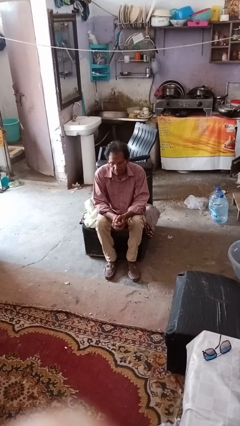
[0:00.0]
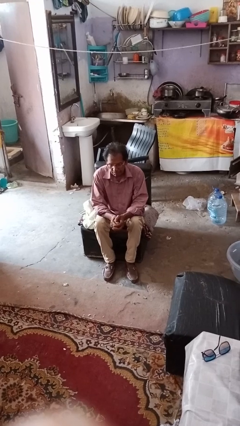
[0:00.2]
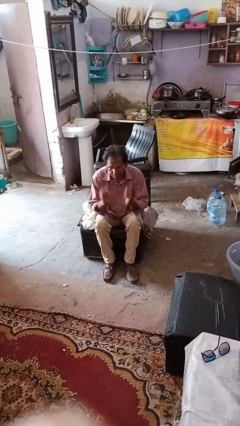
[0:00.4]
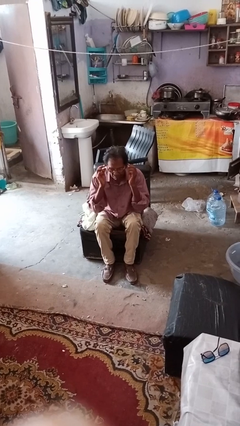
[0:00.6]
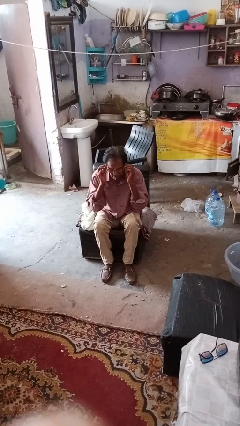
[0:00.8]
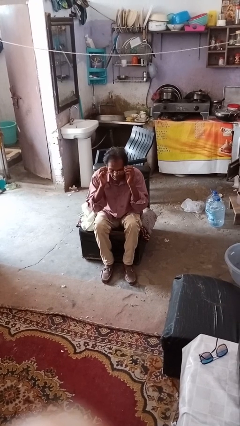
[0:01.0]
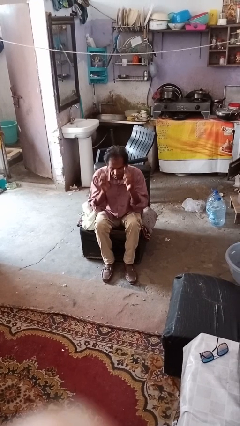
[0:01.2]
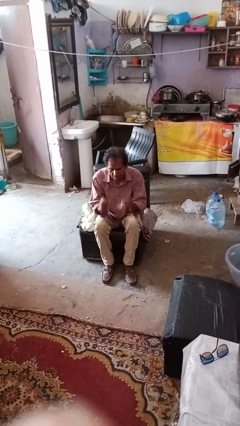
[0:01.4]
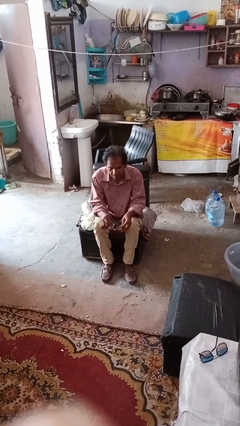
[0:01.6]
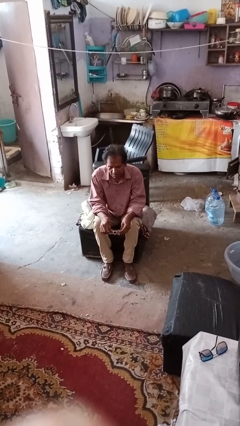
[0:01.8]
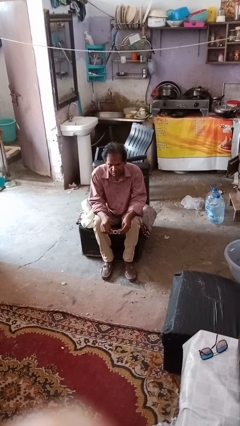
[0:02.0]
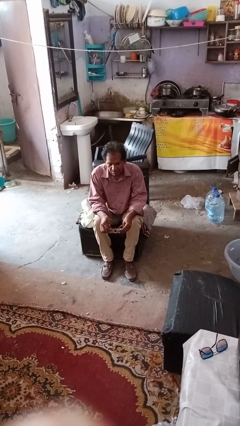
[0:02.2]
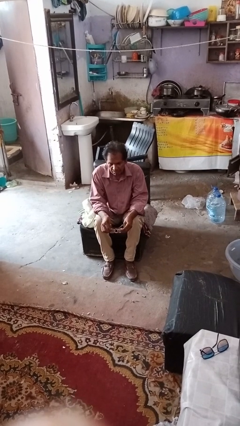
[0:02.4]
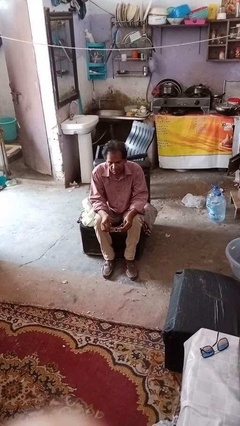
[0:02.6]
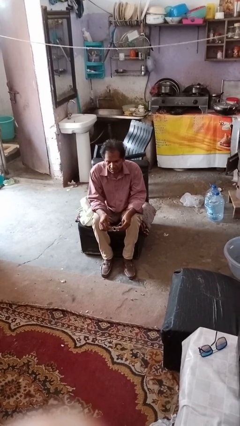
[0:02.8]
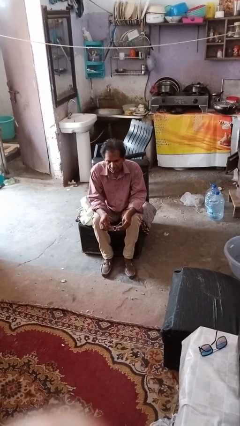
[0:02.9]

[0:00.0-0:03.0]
person takes off glasses

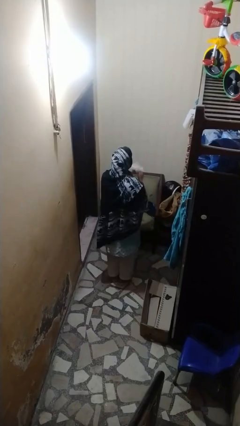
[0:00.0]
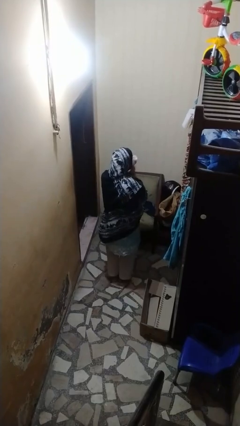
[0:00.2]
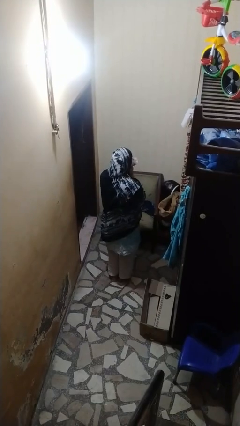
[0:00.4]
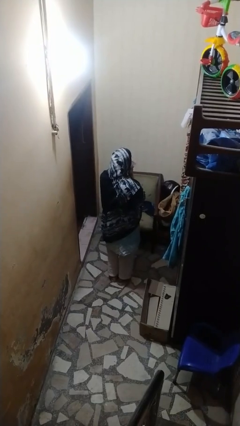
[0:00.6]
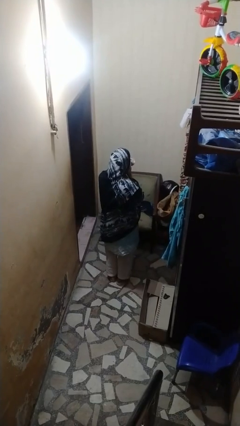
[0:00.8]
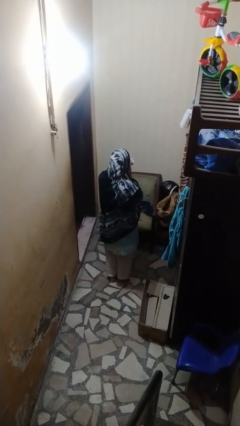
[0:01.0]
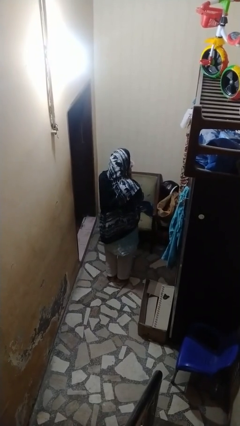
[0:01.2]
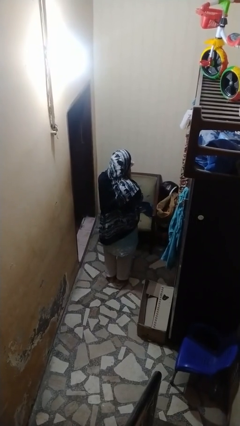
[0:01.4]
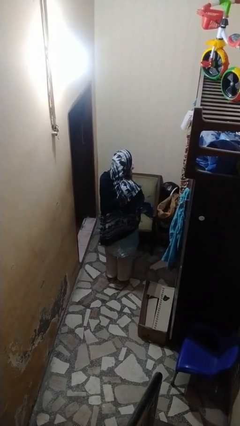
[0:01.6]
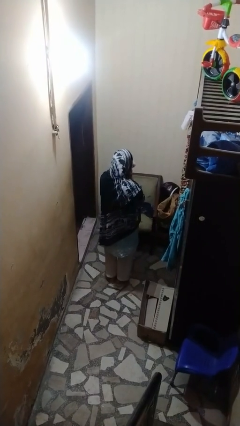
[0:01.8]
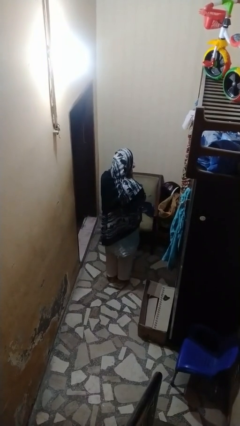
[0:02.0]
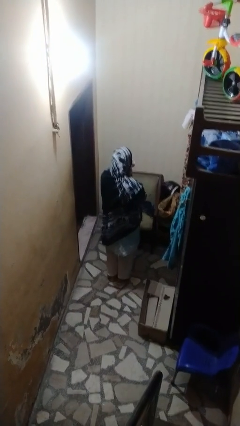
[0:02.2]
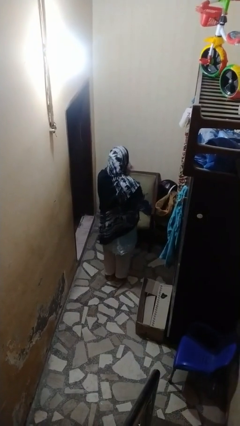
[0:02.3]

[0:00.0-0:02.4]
person blows nose

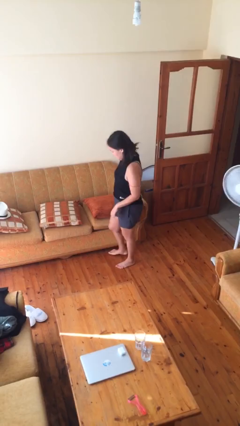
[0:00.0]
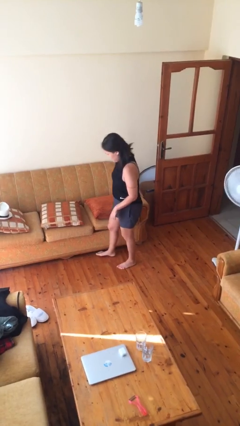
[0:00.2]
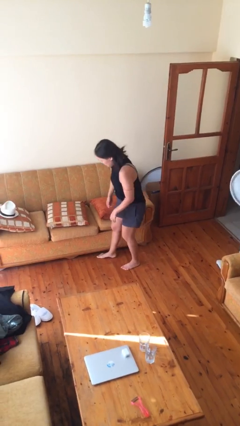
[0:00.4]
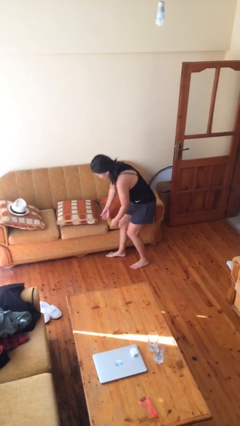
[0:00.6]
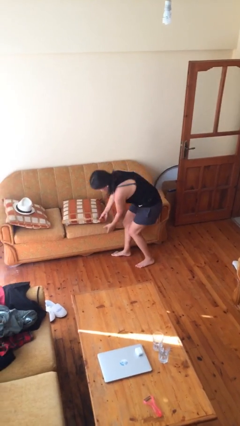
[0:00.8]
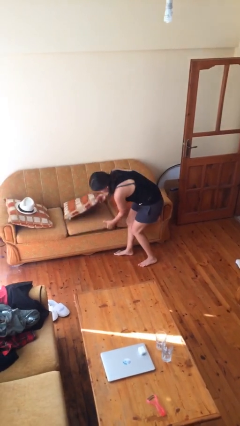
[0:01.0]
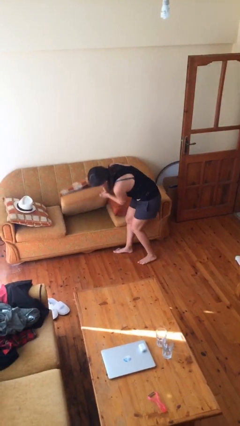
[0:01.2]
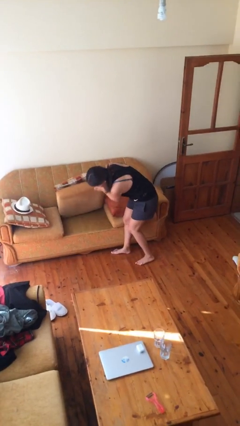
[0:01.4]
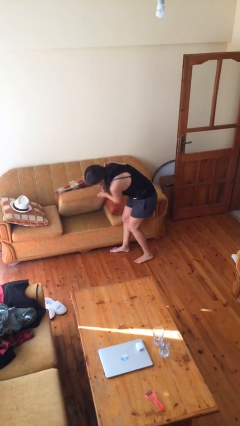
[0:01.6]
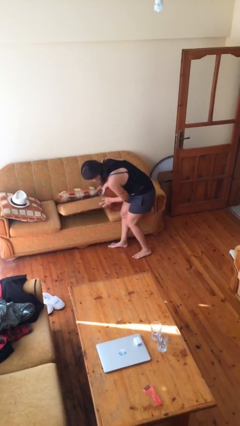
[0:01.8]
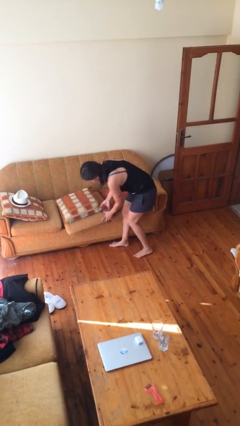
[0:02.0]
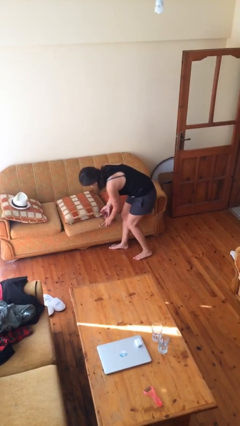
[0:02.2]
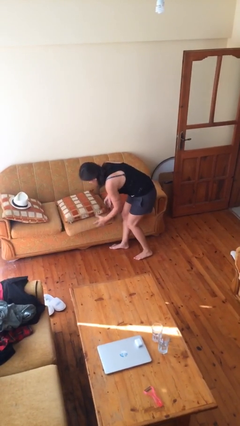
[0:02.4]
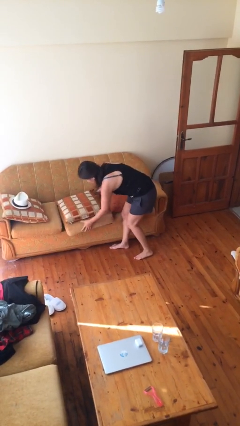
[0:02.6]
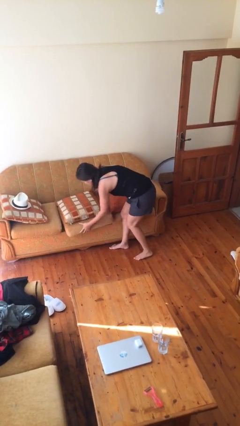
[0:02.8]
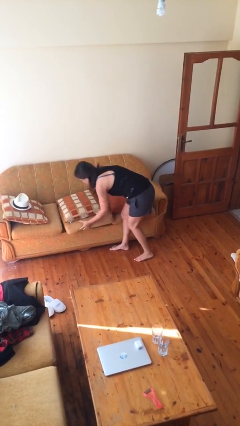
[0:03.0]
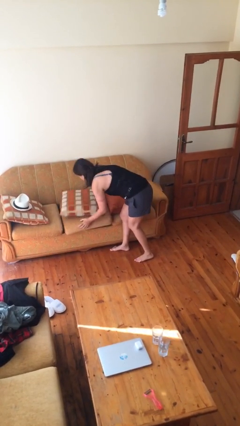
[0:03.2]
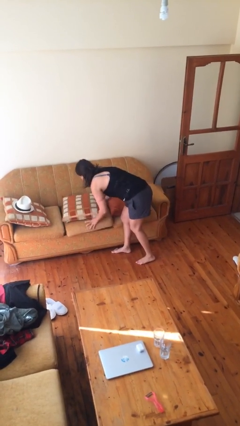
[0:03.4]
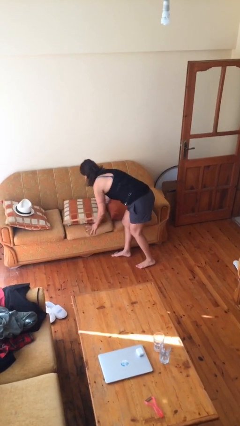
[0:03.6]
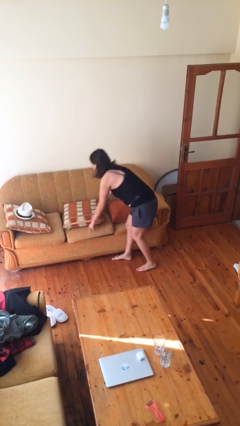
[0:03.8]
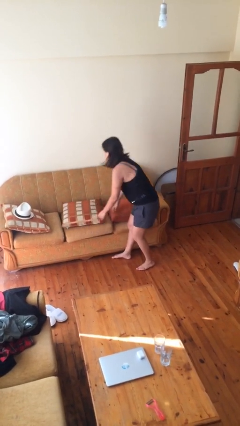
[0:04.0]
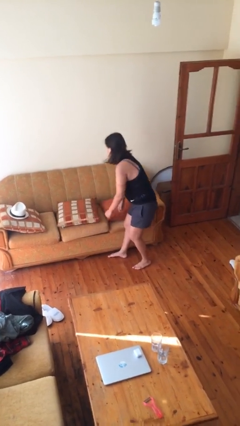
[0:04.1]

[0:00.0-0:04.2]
person searches in couch

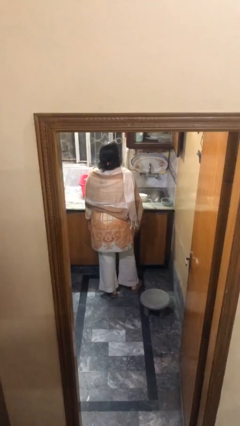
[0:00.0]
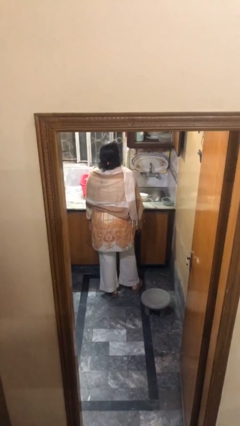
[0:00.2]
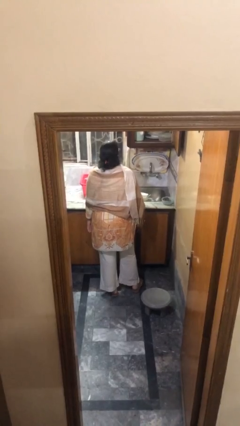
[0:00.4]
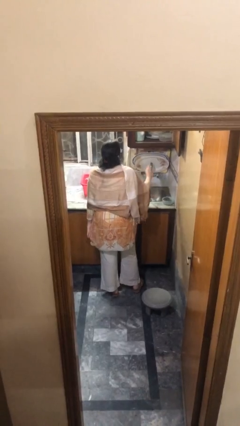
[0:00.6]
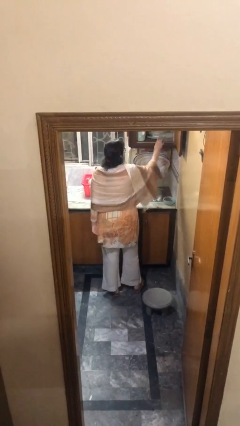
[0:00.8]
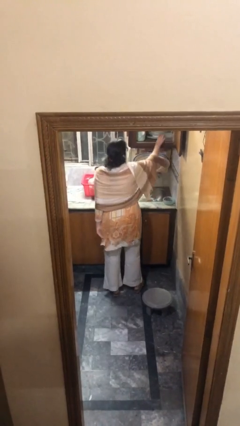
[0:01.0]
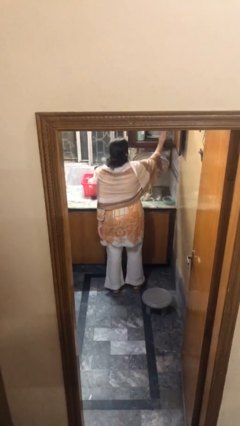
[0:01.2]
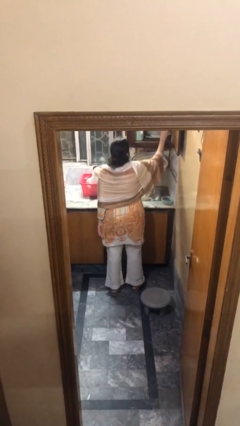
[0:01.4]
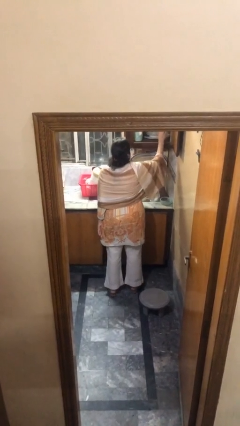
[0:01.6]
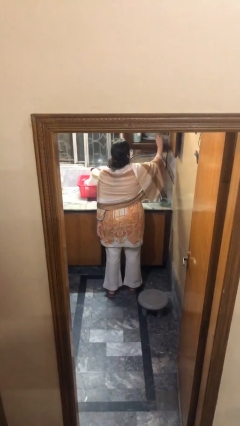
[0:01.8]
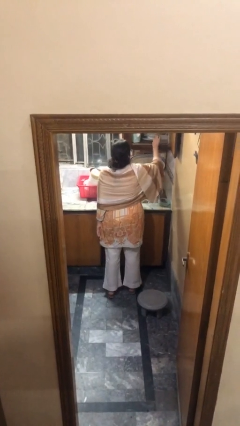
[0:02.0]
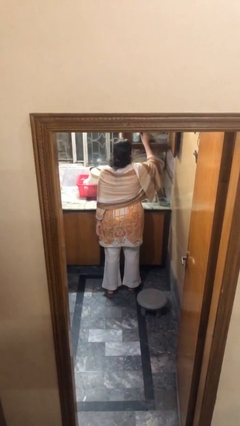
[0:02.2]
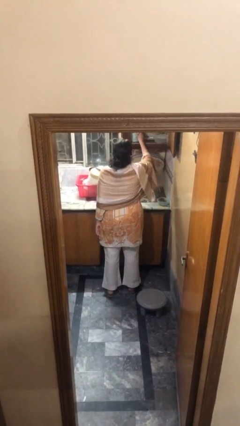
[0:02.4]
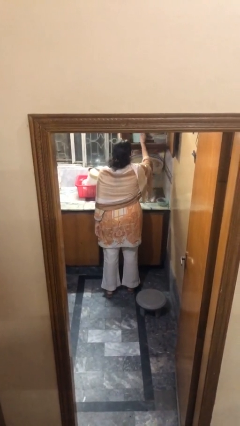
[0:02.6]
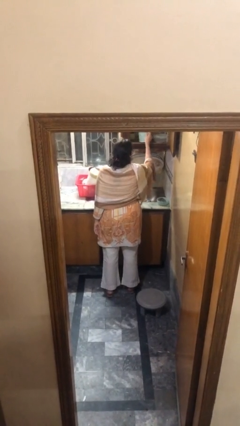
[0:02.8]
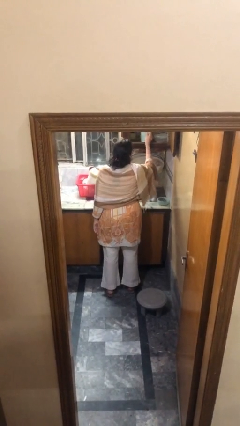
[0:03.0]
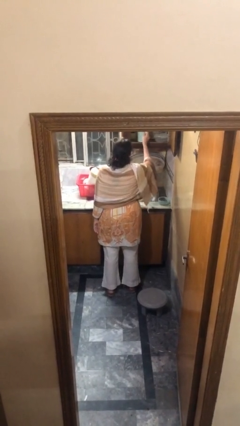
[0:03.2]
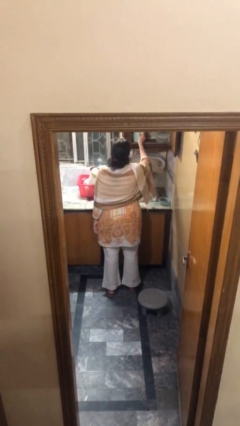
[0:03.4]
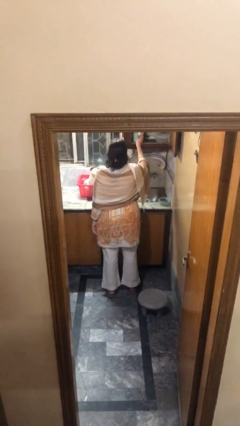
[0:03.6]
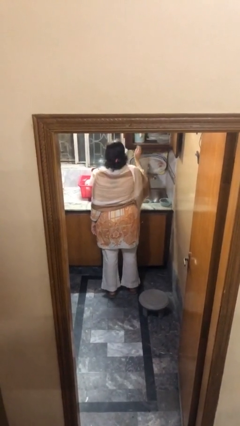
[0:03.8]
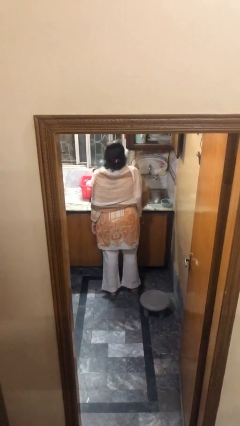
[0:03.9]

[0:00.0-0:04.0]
person searches in kitchen drawer

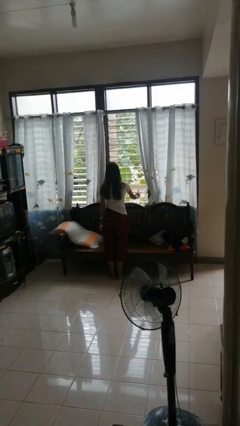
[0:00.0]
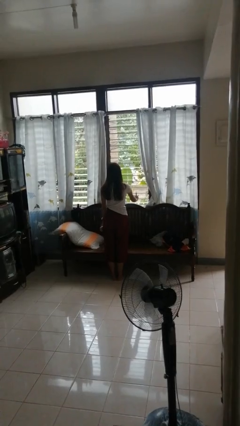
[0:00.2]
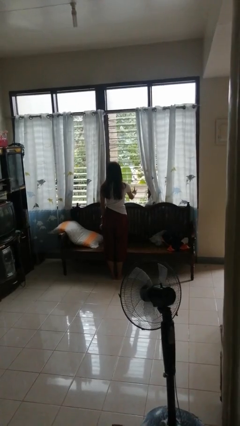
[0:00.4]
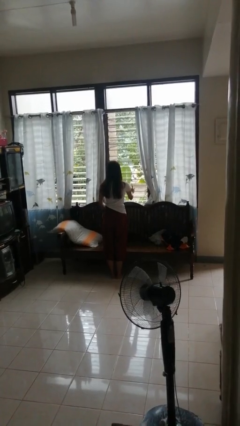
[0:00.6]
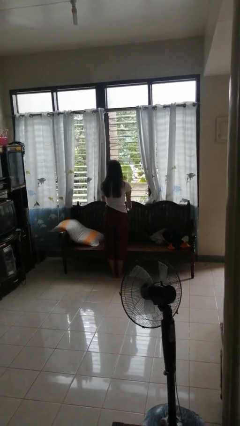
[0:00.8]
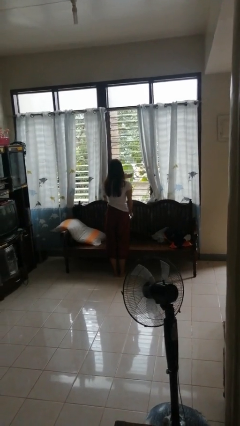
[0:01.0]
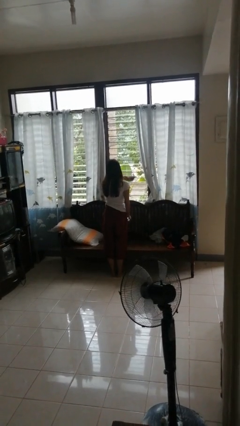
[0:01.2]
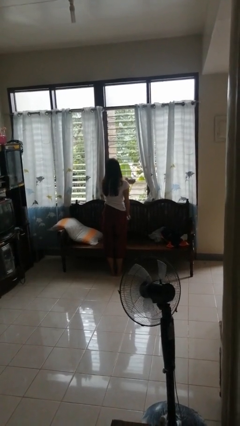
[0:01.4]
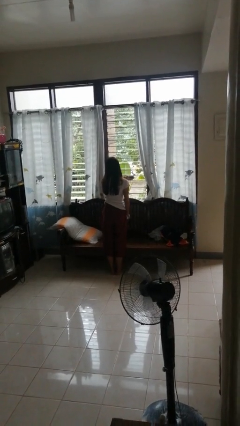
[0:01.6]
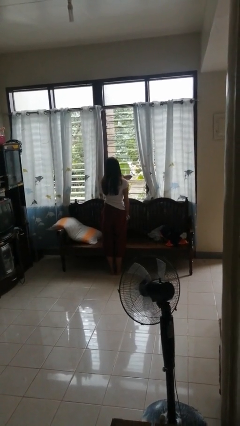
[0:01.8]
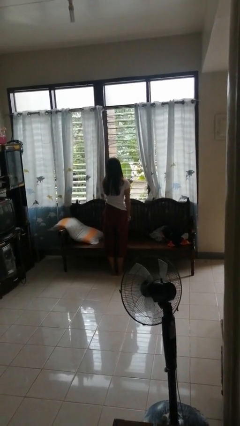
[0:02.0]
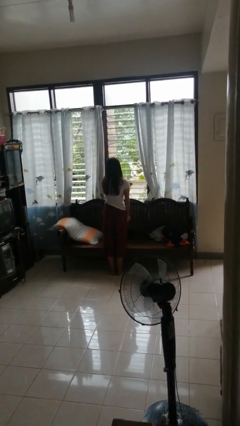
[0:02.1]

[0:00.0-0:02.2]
person washes window

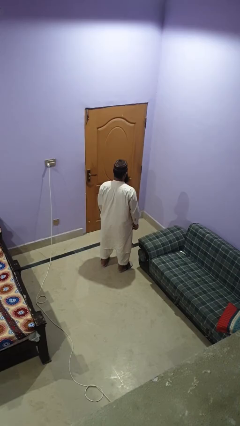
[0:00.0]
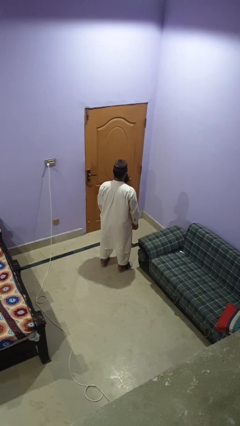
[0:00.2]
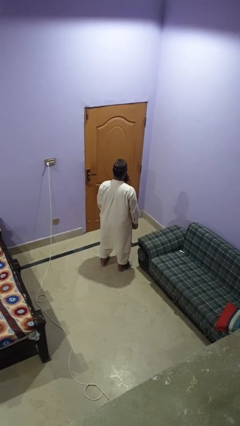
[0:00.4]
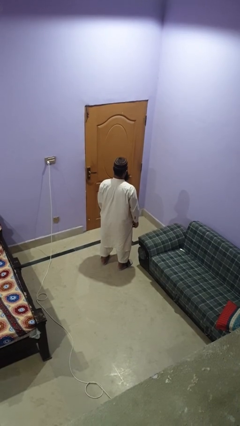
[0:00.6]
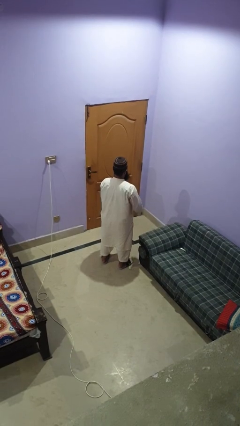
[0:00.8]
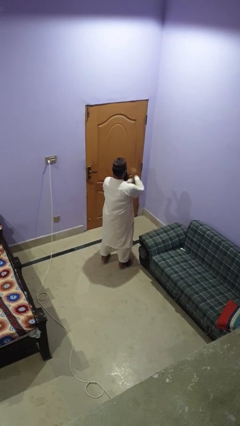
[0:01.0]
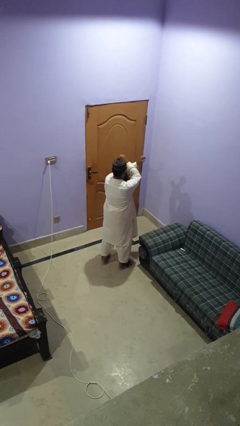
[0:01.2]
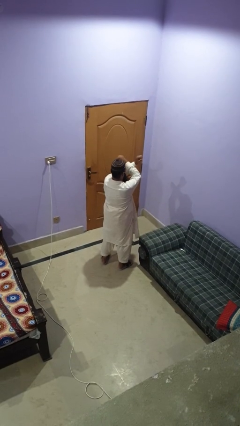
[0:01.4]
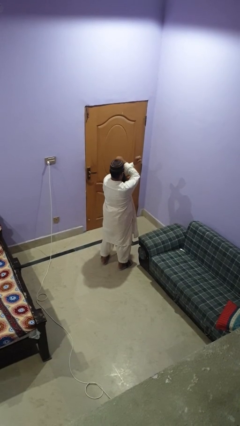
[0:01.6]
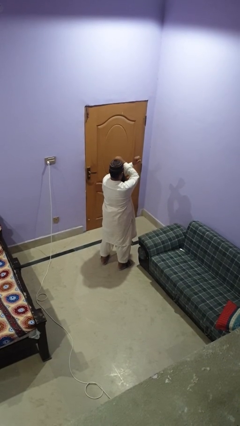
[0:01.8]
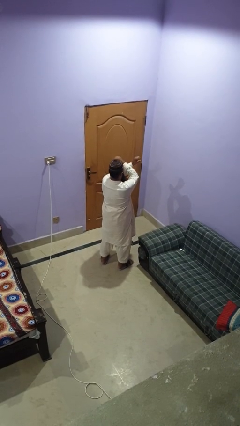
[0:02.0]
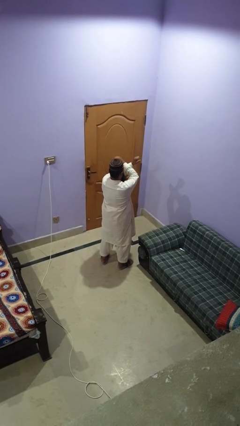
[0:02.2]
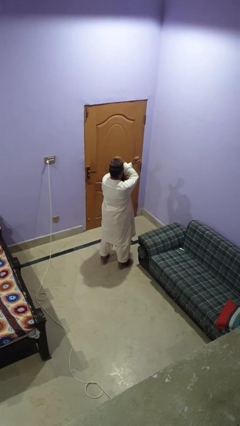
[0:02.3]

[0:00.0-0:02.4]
person gestures arms x
